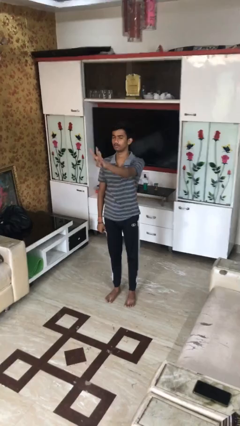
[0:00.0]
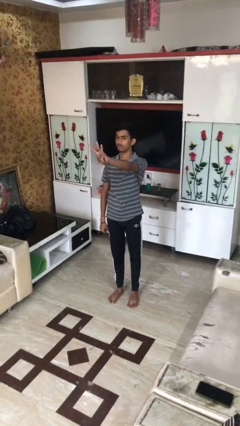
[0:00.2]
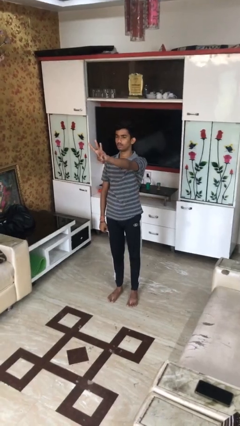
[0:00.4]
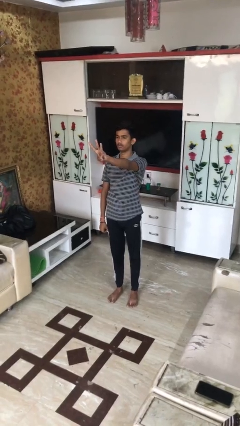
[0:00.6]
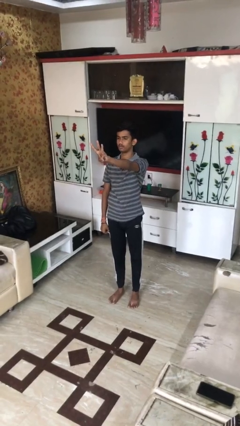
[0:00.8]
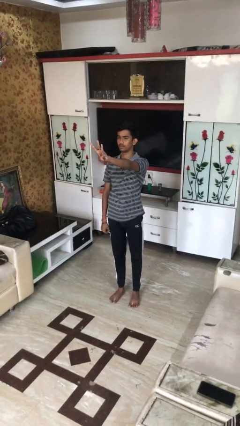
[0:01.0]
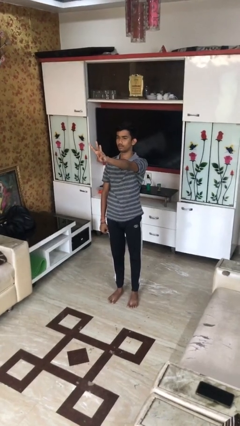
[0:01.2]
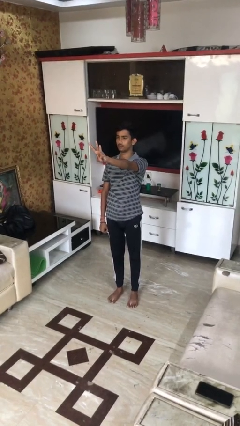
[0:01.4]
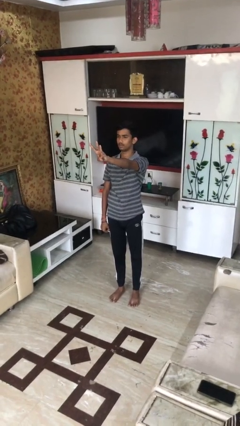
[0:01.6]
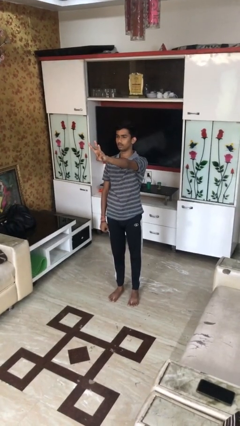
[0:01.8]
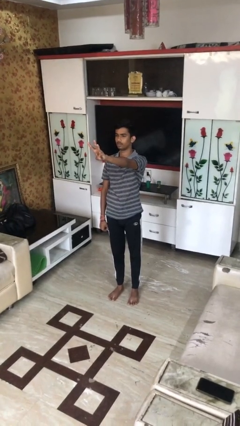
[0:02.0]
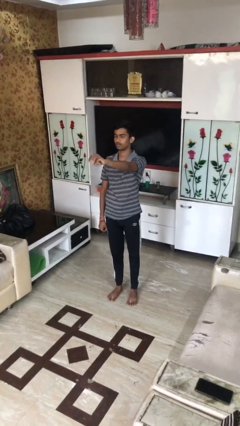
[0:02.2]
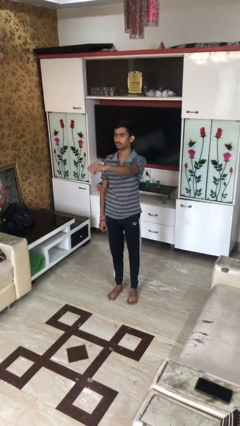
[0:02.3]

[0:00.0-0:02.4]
person gestures number three

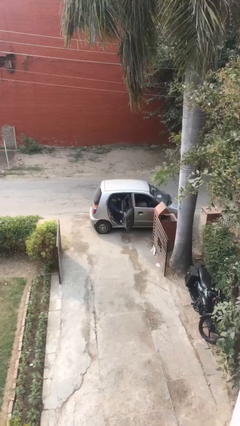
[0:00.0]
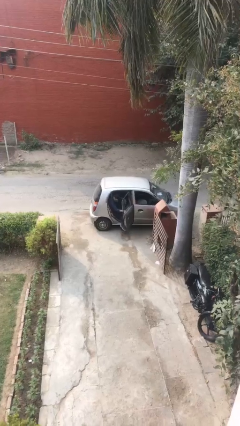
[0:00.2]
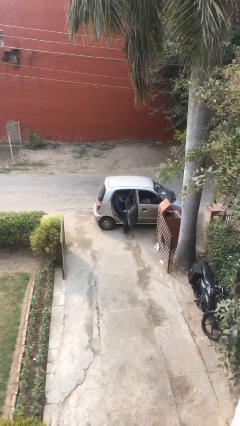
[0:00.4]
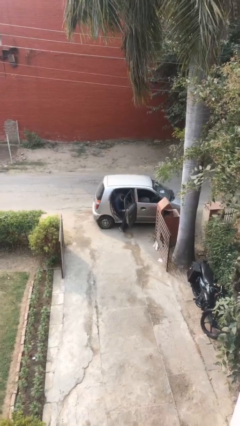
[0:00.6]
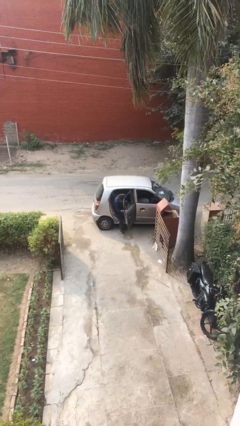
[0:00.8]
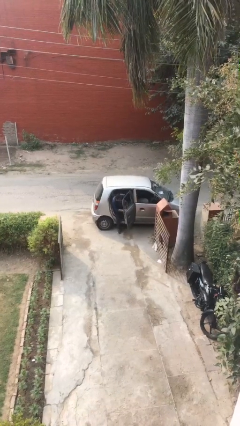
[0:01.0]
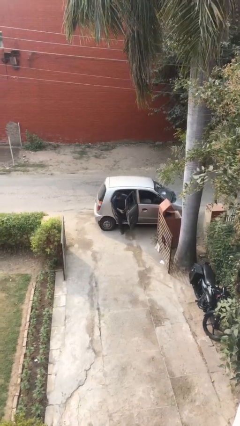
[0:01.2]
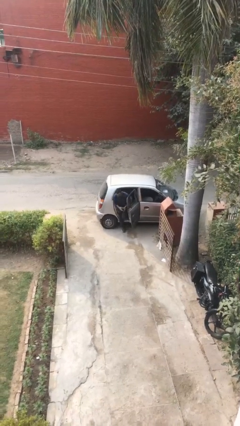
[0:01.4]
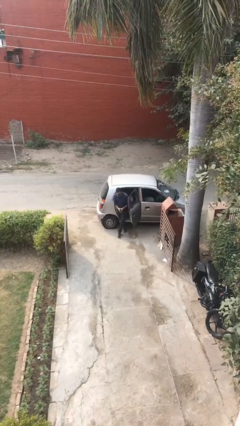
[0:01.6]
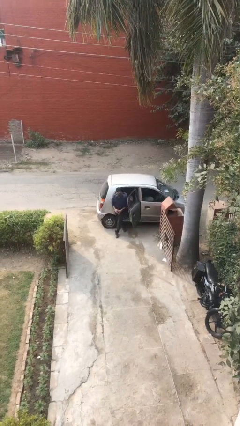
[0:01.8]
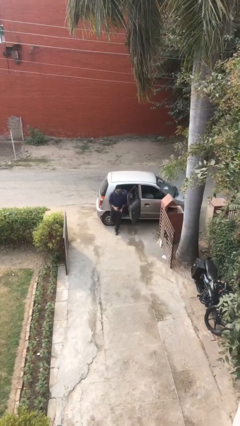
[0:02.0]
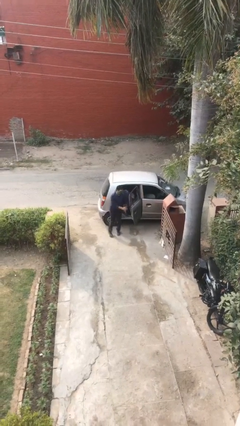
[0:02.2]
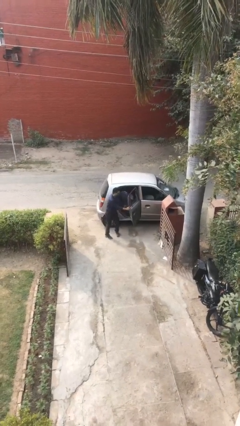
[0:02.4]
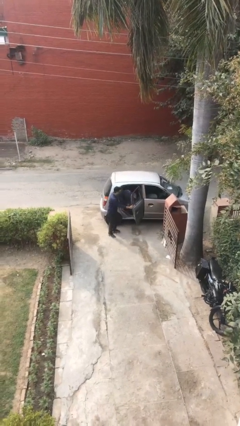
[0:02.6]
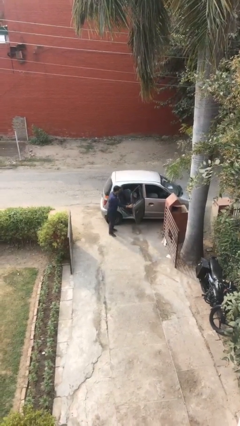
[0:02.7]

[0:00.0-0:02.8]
person exits car

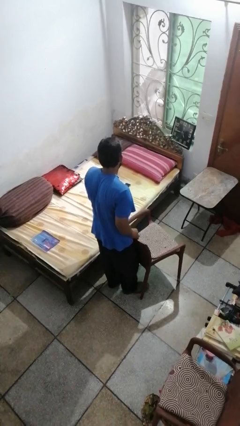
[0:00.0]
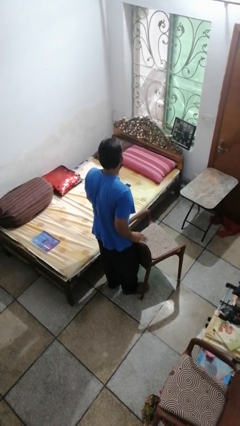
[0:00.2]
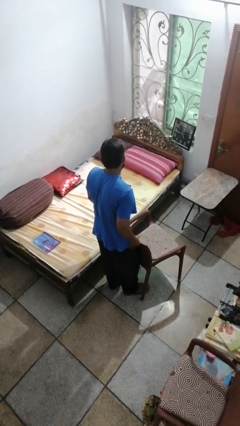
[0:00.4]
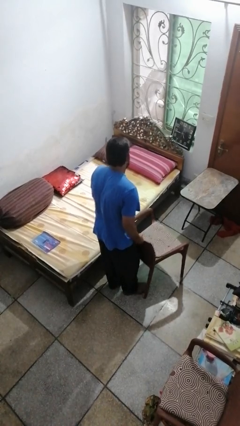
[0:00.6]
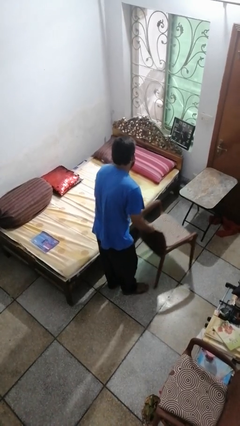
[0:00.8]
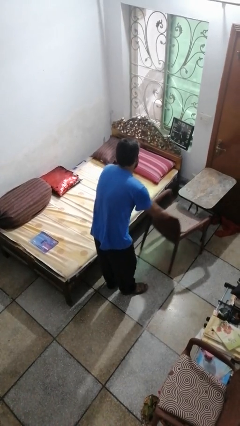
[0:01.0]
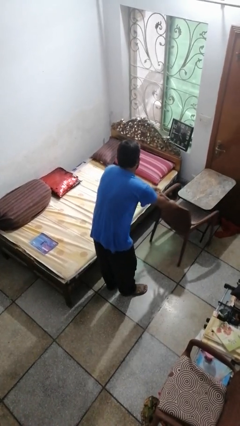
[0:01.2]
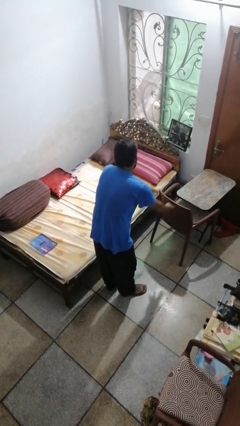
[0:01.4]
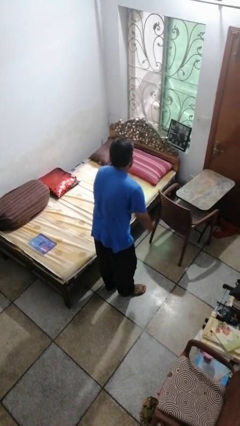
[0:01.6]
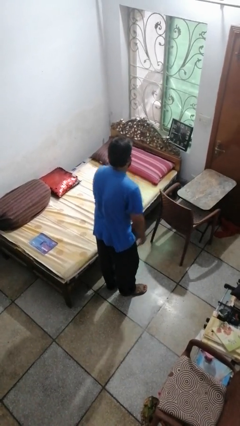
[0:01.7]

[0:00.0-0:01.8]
person pushes in chair

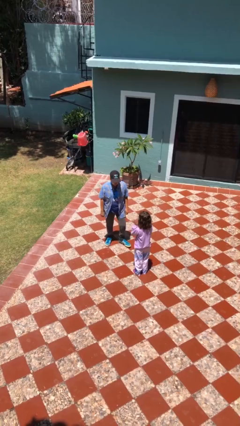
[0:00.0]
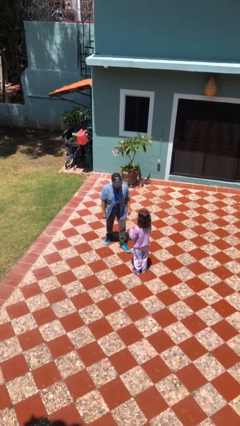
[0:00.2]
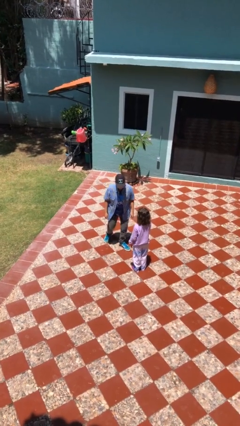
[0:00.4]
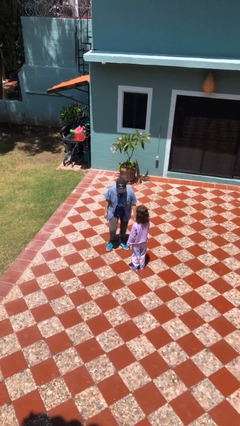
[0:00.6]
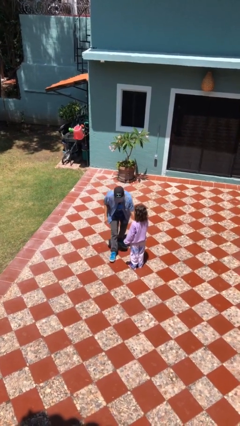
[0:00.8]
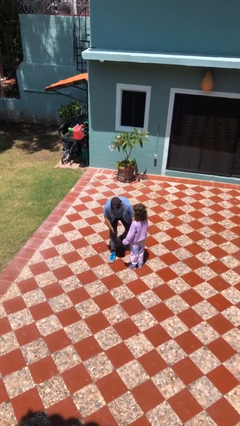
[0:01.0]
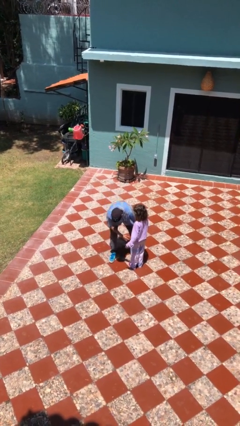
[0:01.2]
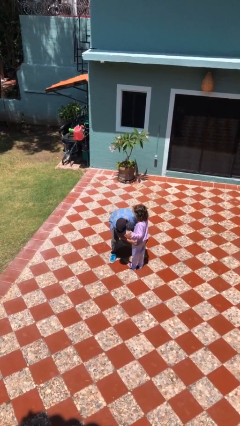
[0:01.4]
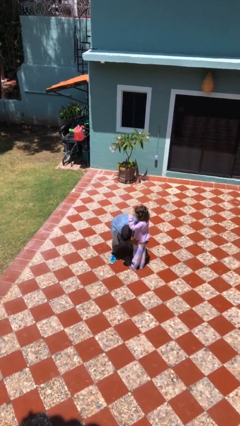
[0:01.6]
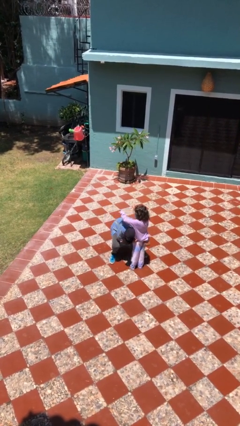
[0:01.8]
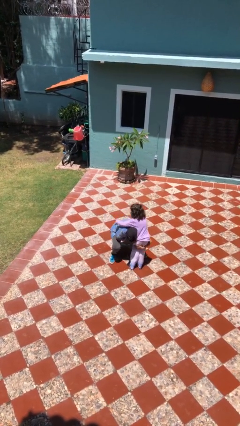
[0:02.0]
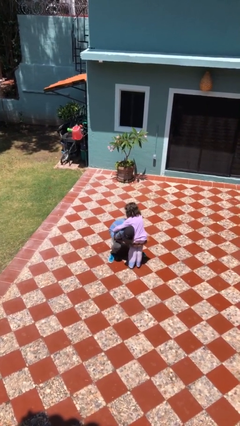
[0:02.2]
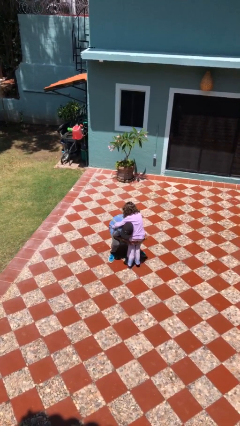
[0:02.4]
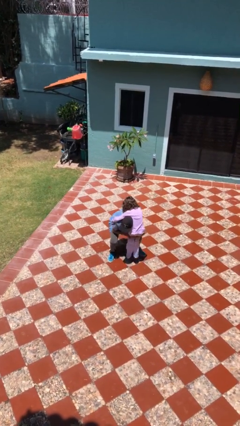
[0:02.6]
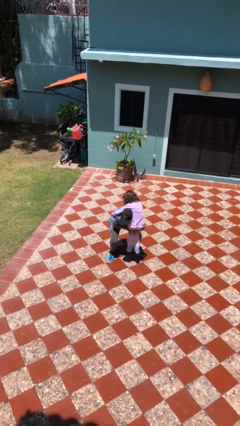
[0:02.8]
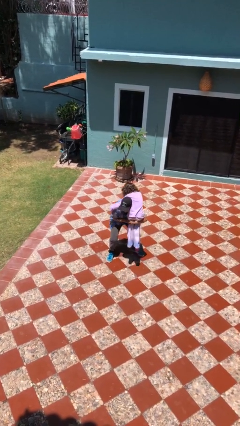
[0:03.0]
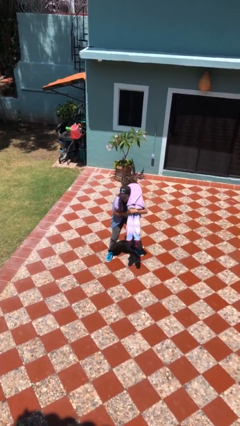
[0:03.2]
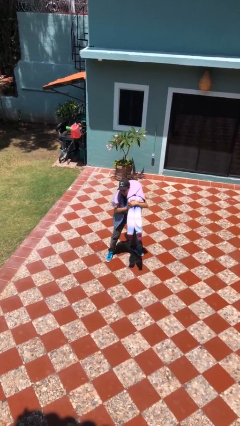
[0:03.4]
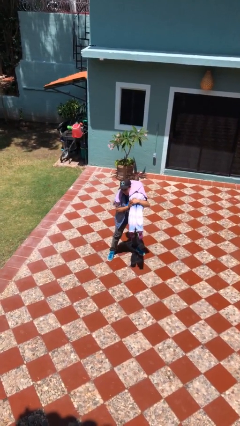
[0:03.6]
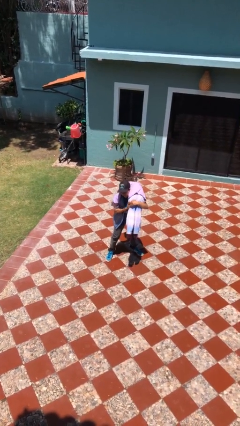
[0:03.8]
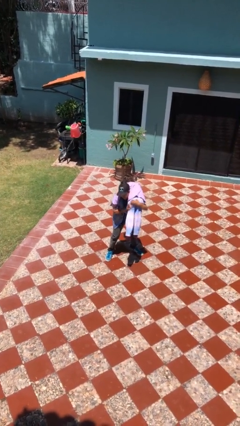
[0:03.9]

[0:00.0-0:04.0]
person carries person over shoulder

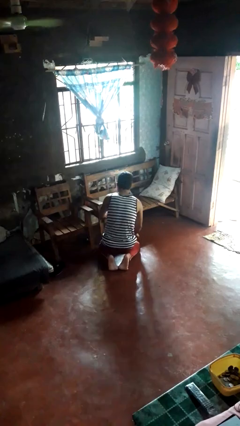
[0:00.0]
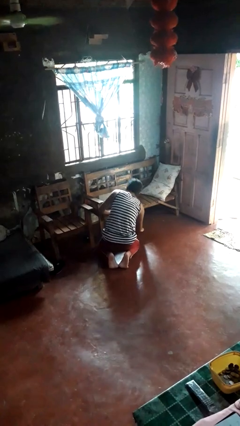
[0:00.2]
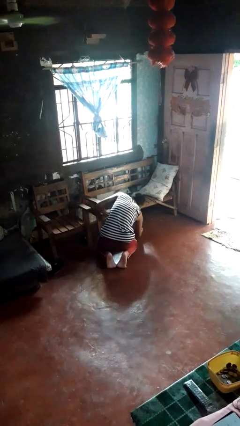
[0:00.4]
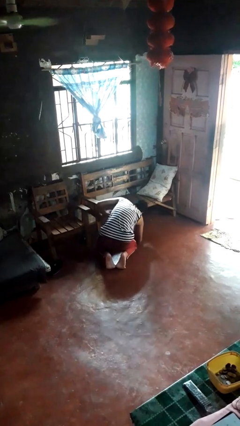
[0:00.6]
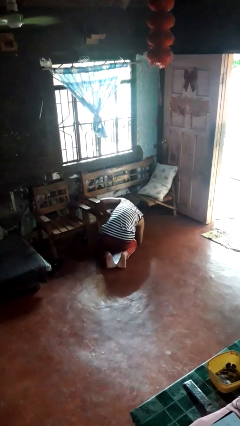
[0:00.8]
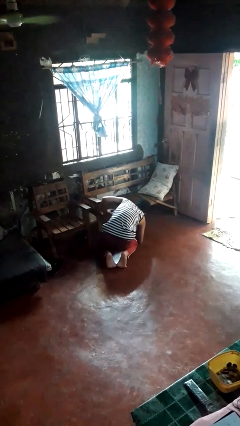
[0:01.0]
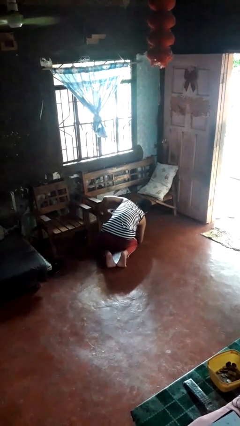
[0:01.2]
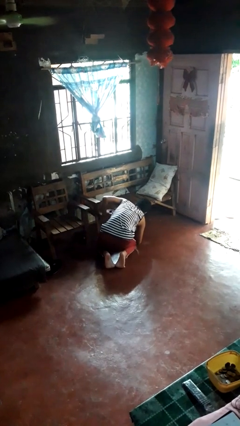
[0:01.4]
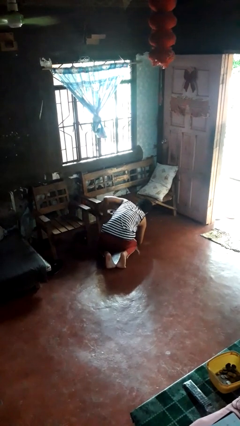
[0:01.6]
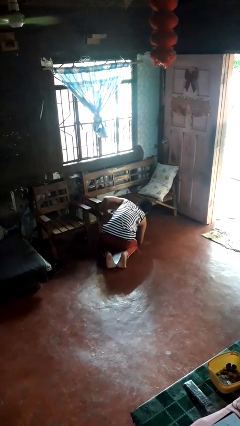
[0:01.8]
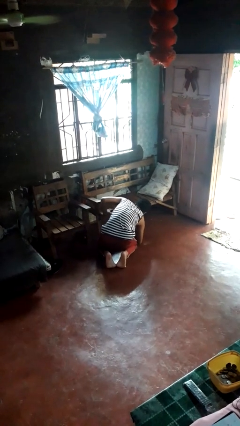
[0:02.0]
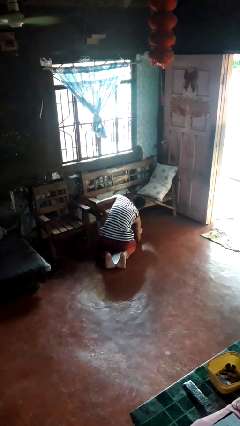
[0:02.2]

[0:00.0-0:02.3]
person searches in couch

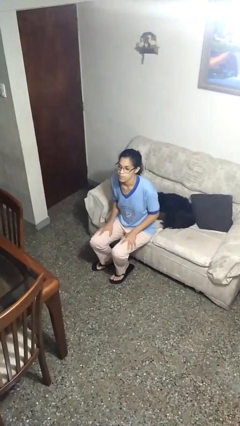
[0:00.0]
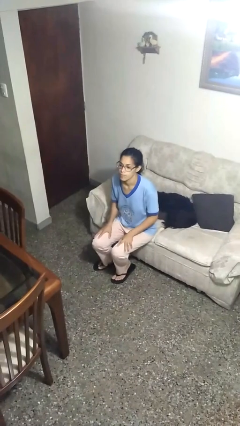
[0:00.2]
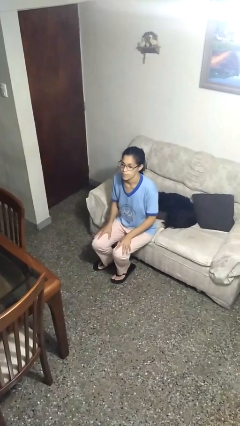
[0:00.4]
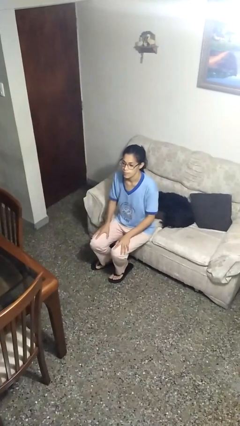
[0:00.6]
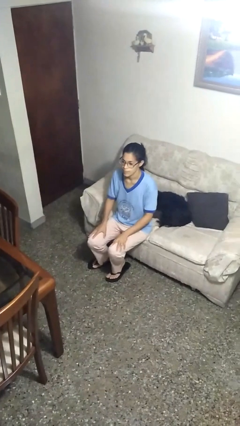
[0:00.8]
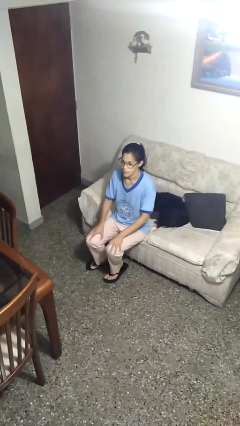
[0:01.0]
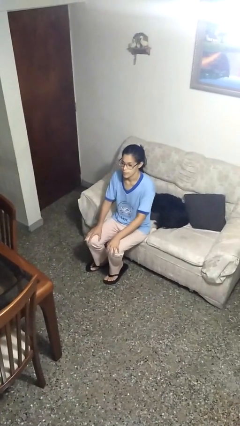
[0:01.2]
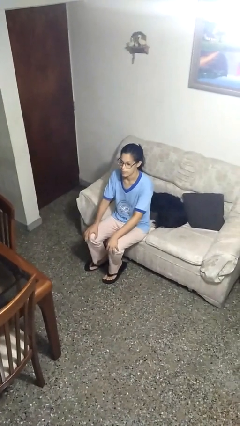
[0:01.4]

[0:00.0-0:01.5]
person slaps hands on thighs

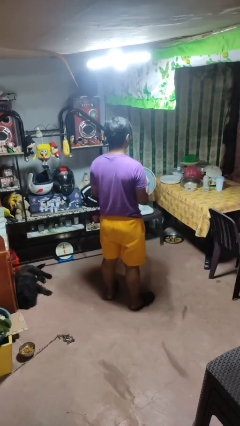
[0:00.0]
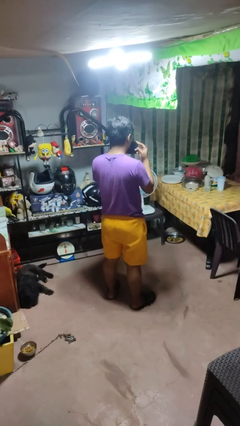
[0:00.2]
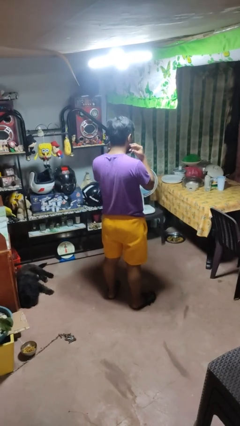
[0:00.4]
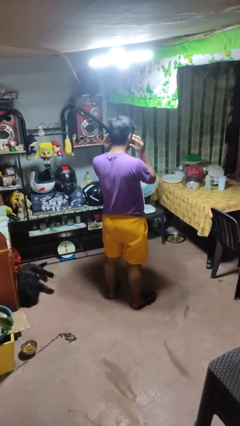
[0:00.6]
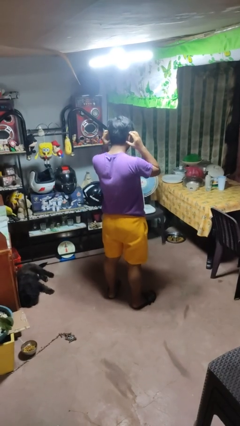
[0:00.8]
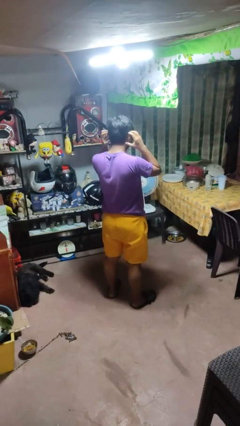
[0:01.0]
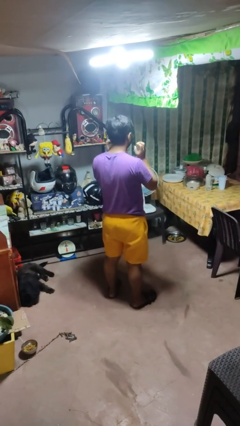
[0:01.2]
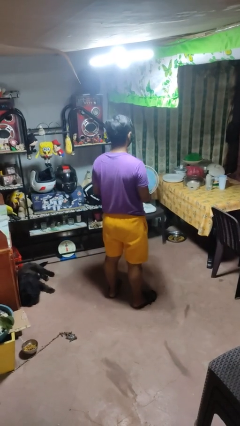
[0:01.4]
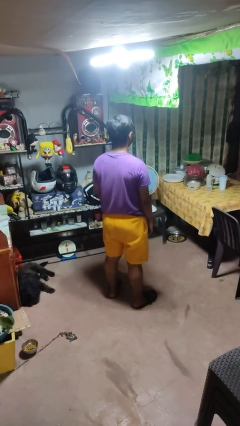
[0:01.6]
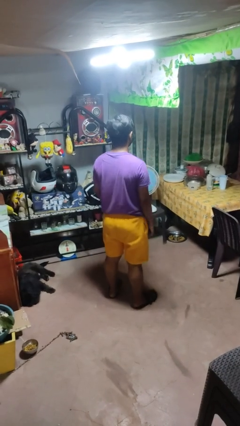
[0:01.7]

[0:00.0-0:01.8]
person puts on facemask
